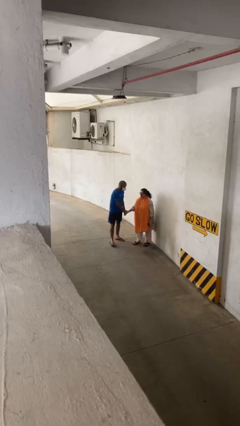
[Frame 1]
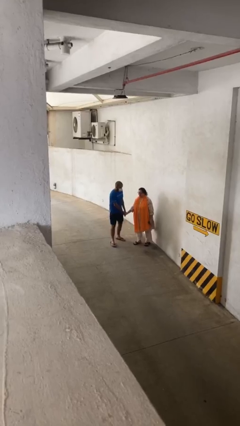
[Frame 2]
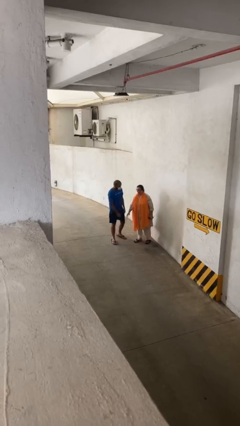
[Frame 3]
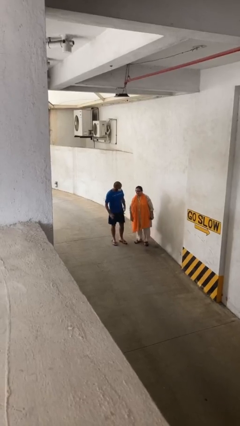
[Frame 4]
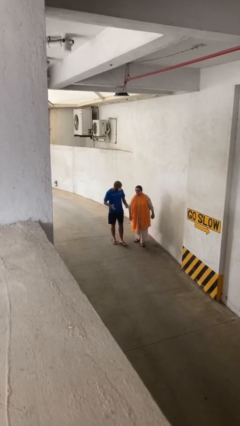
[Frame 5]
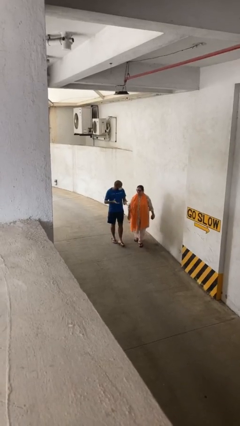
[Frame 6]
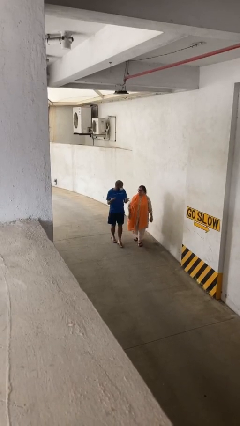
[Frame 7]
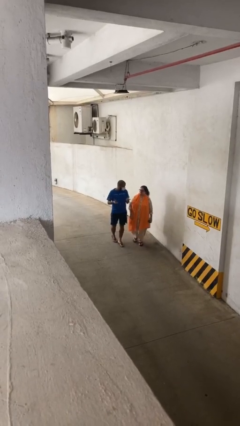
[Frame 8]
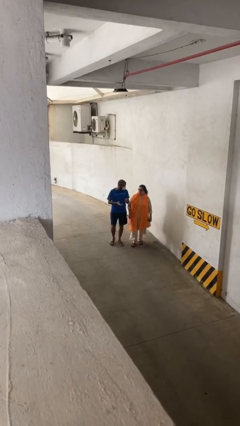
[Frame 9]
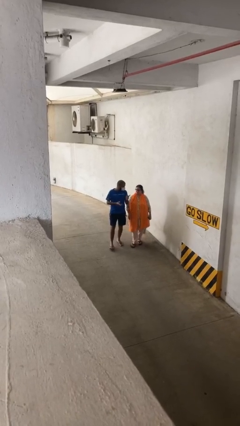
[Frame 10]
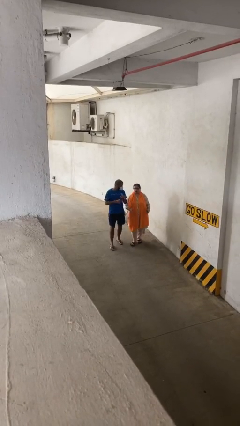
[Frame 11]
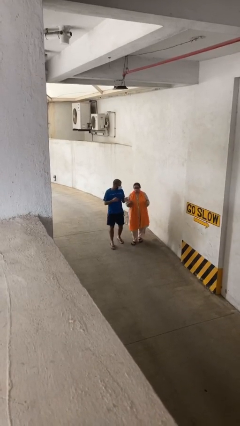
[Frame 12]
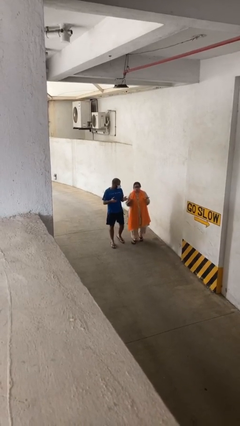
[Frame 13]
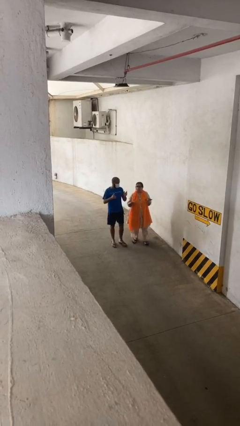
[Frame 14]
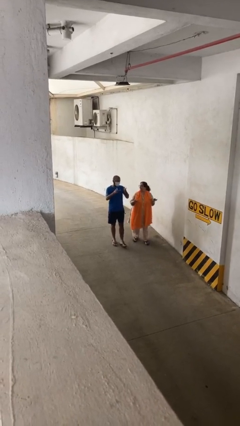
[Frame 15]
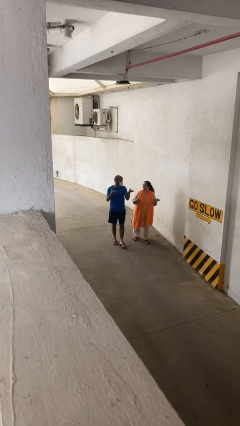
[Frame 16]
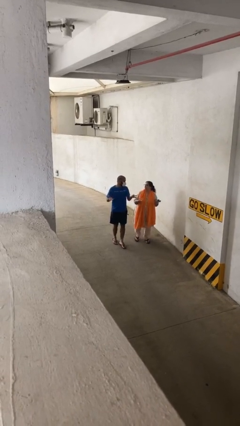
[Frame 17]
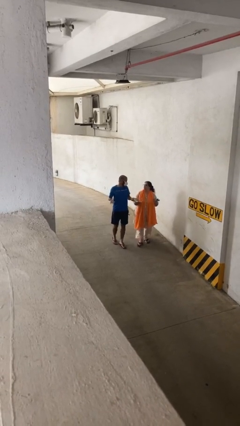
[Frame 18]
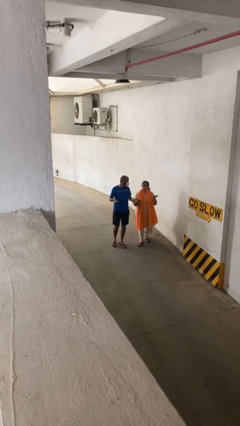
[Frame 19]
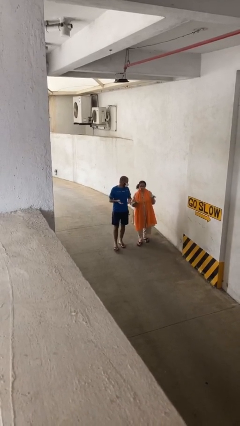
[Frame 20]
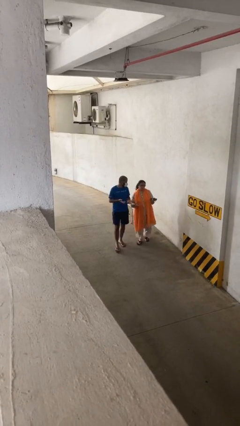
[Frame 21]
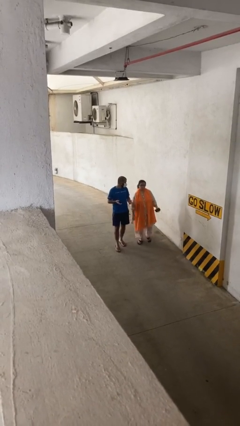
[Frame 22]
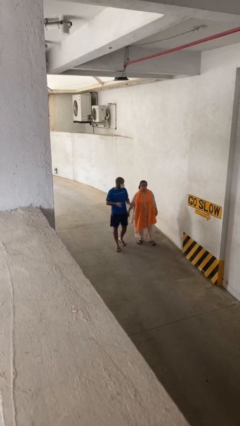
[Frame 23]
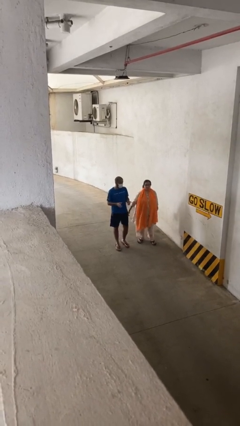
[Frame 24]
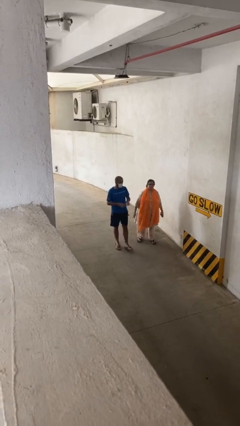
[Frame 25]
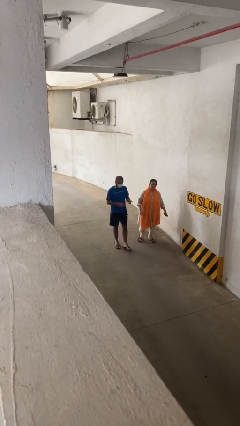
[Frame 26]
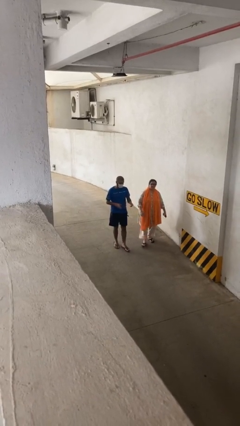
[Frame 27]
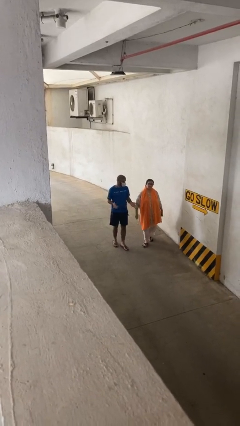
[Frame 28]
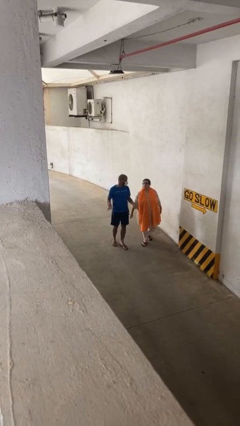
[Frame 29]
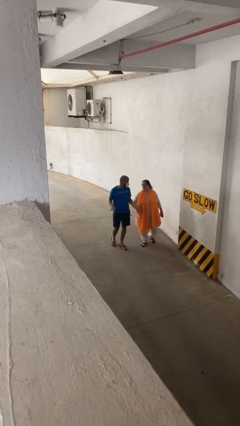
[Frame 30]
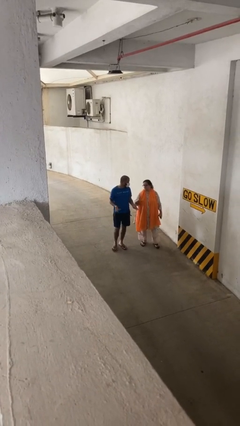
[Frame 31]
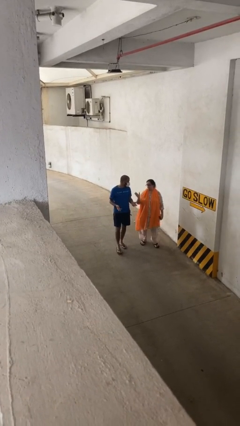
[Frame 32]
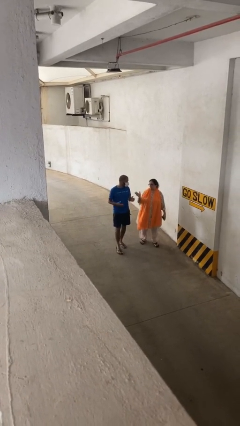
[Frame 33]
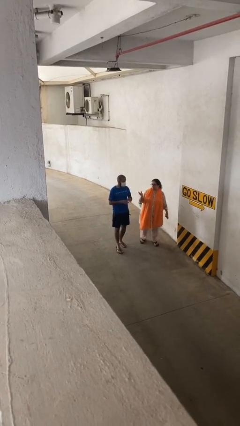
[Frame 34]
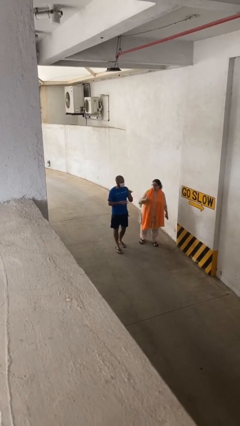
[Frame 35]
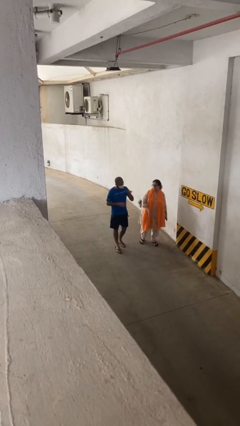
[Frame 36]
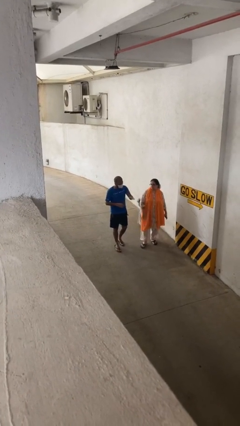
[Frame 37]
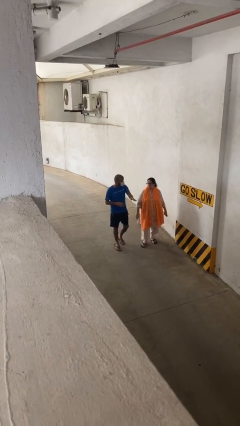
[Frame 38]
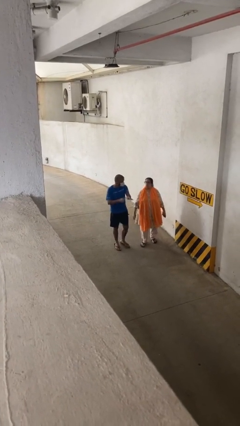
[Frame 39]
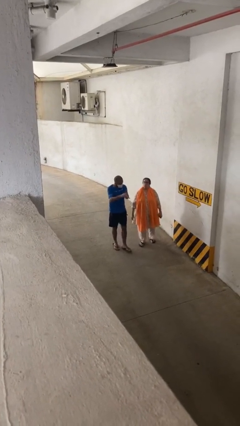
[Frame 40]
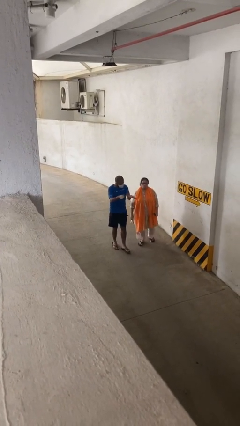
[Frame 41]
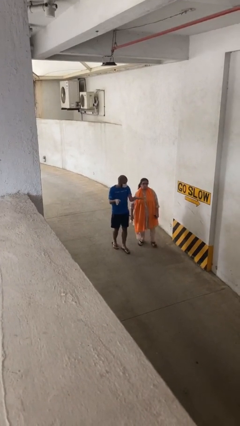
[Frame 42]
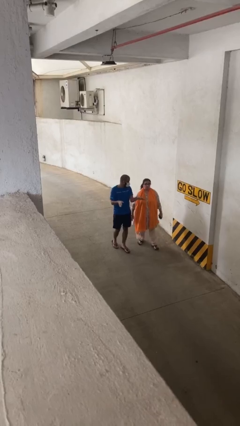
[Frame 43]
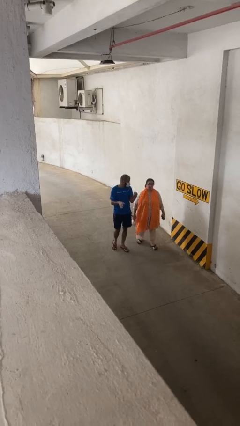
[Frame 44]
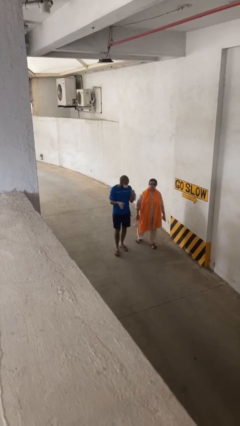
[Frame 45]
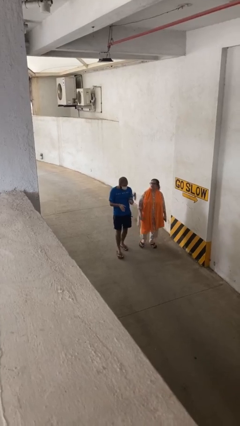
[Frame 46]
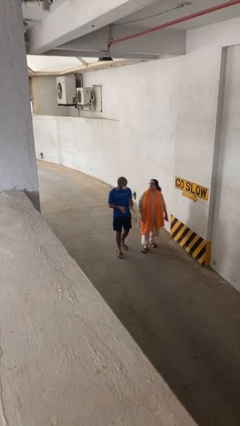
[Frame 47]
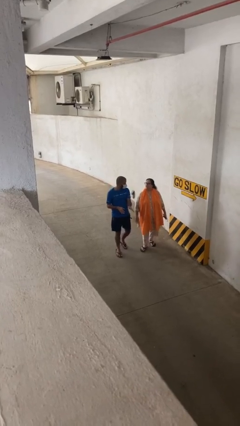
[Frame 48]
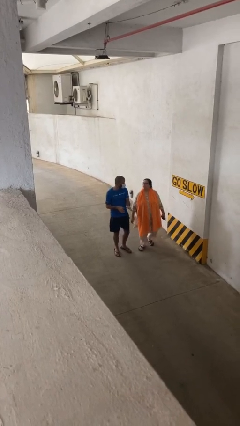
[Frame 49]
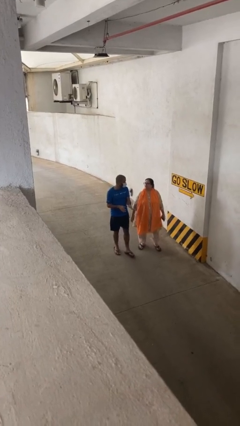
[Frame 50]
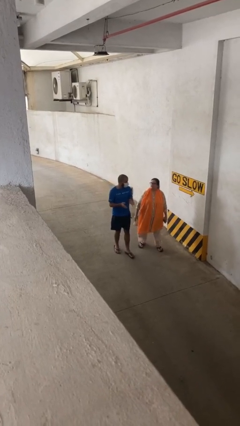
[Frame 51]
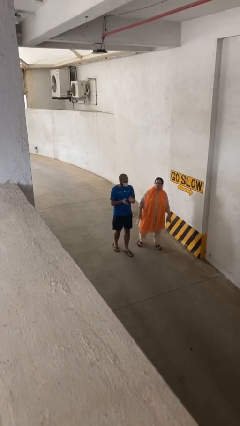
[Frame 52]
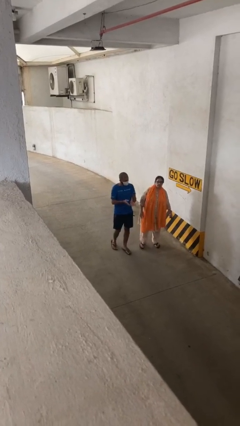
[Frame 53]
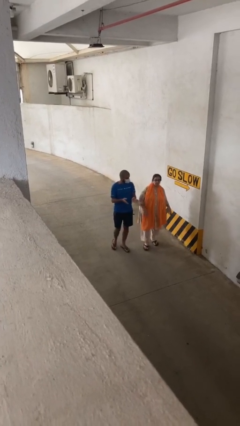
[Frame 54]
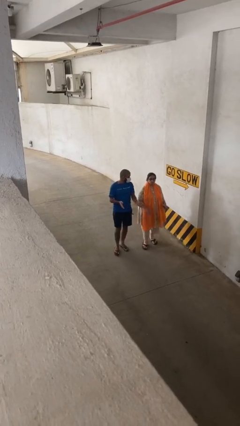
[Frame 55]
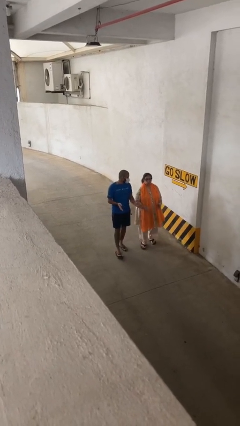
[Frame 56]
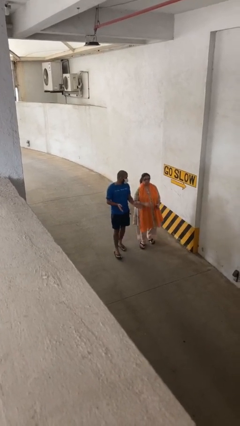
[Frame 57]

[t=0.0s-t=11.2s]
person talks to person

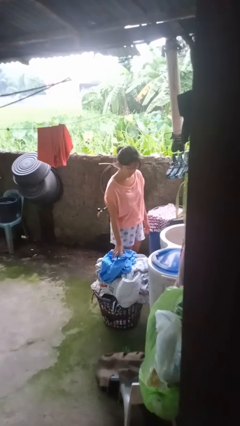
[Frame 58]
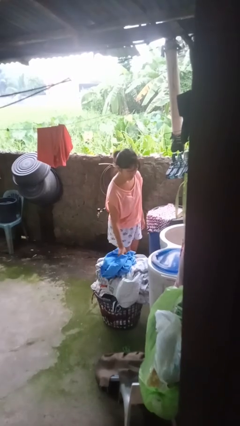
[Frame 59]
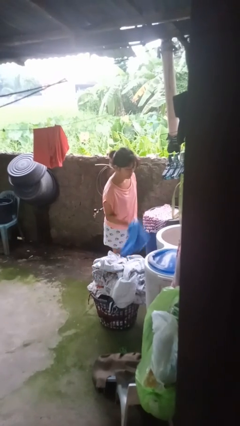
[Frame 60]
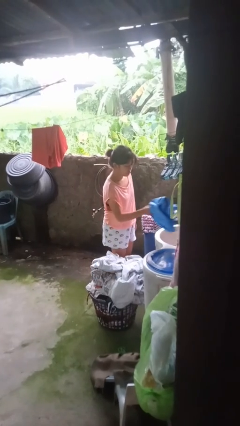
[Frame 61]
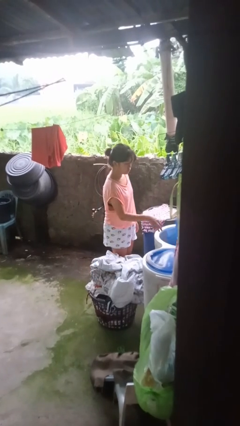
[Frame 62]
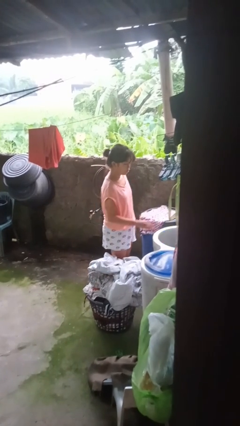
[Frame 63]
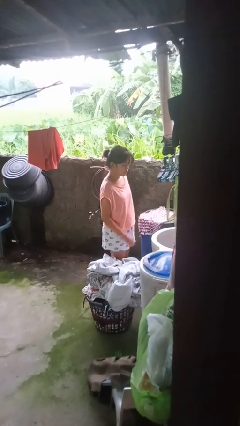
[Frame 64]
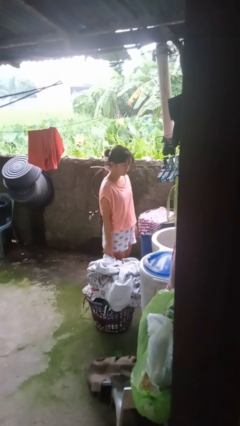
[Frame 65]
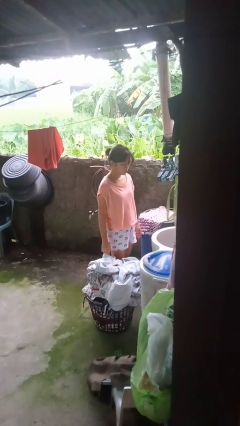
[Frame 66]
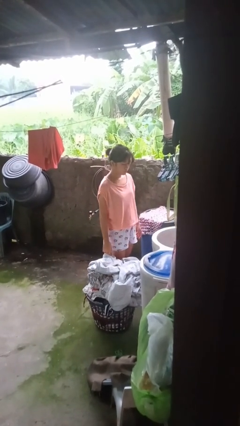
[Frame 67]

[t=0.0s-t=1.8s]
person loads clotheswasher

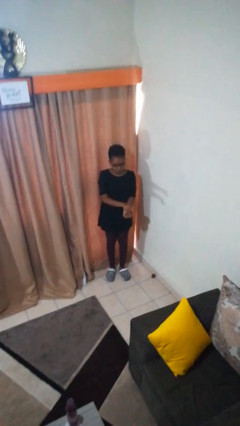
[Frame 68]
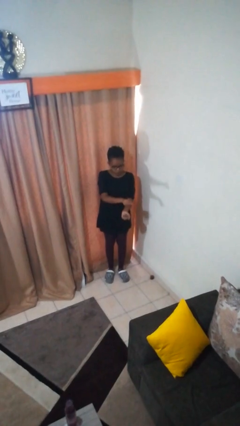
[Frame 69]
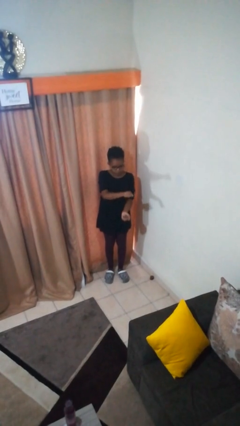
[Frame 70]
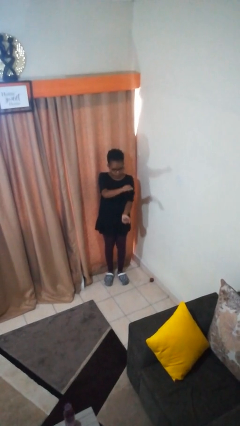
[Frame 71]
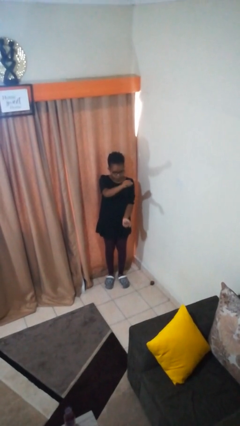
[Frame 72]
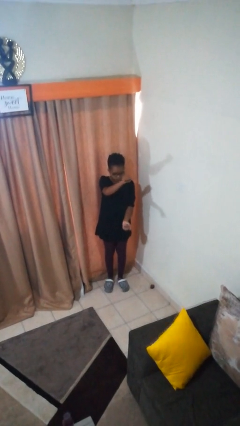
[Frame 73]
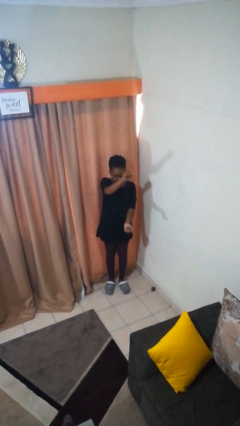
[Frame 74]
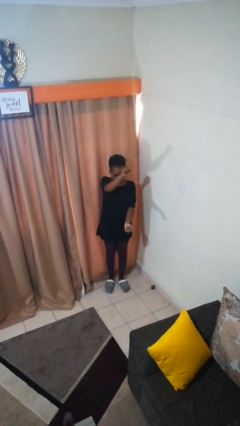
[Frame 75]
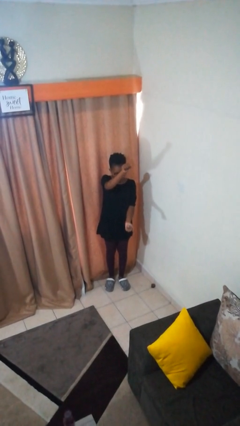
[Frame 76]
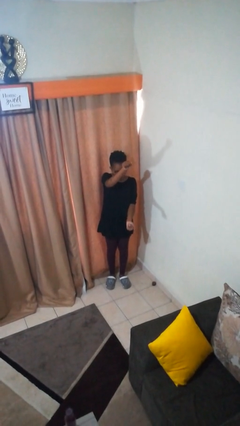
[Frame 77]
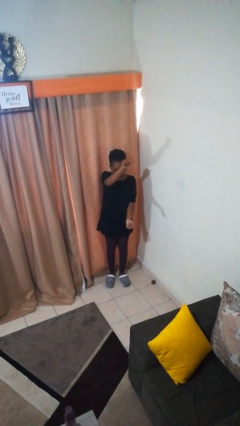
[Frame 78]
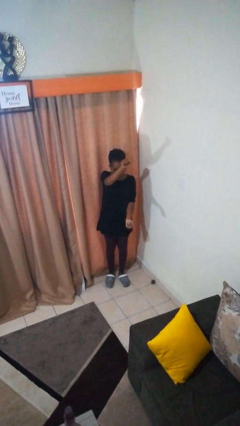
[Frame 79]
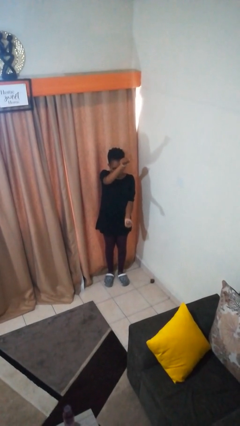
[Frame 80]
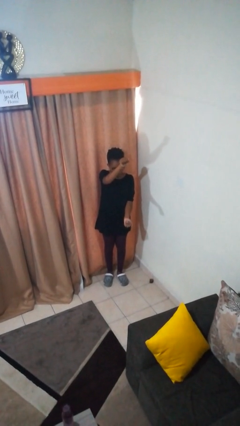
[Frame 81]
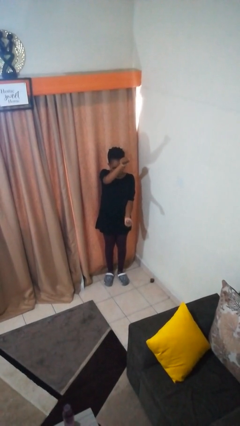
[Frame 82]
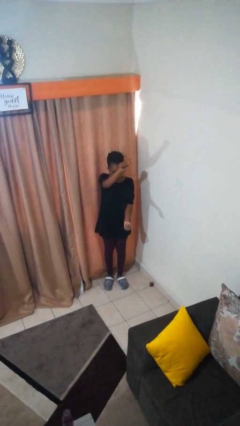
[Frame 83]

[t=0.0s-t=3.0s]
person gestures zoom in

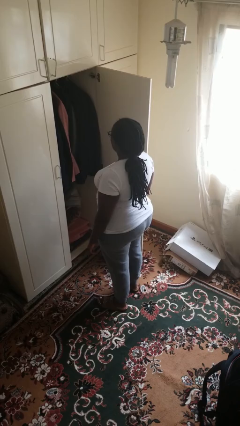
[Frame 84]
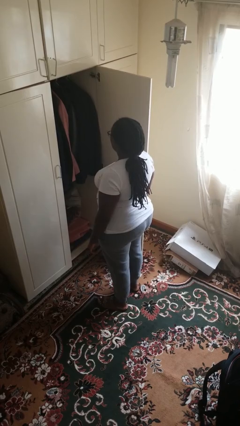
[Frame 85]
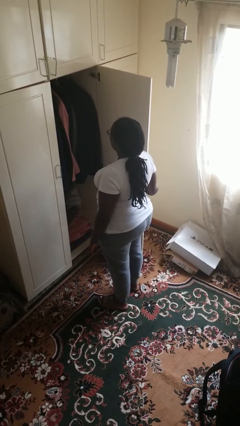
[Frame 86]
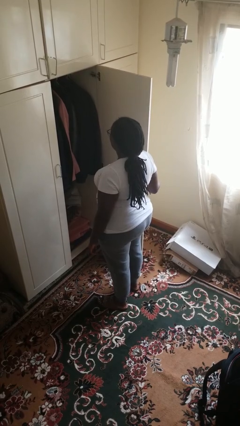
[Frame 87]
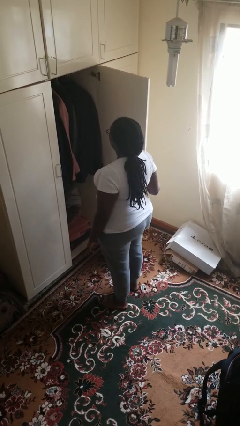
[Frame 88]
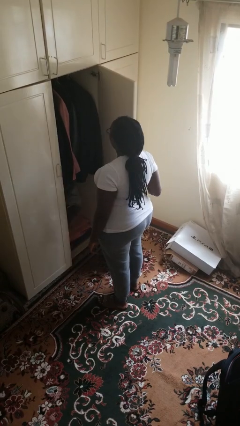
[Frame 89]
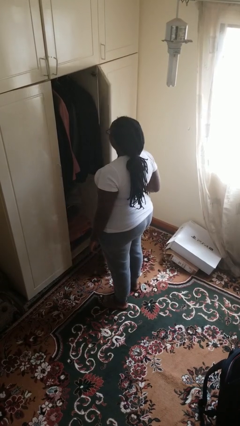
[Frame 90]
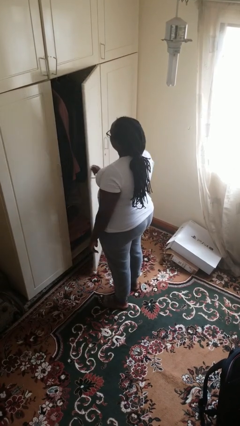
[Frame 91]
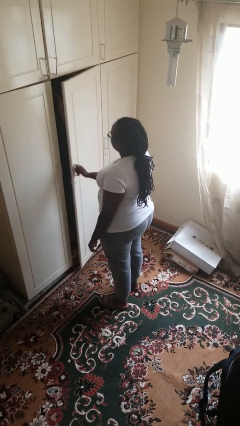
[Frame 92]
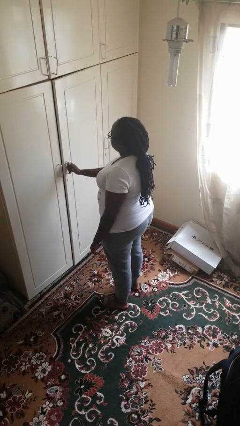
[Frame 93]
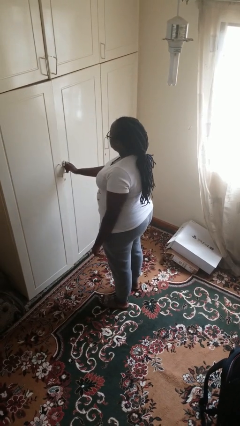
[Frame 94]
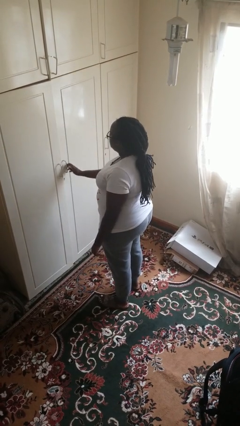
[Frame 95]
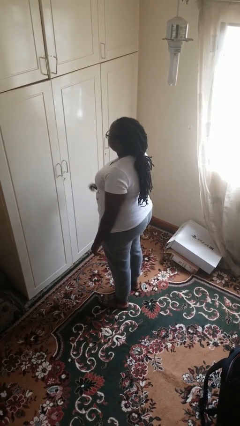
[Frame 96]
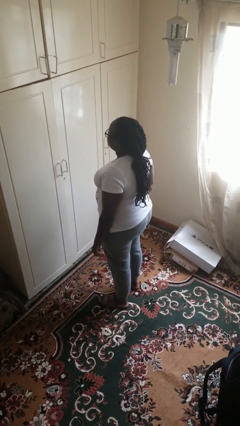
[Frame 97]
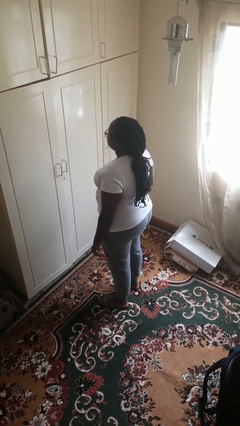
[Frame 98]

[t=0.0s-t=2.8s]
person closes closet door
